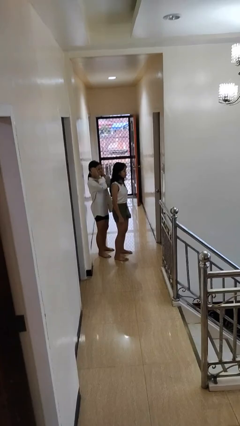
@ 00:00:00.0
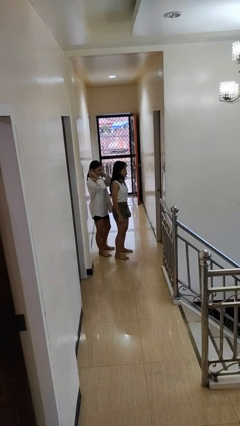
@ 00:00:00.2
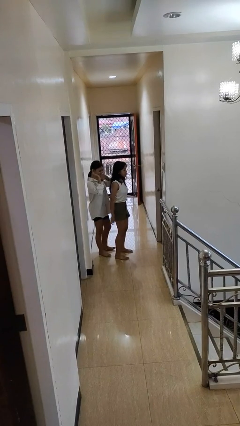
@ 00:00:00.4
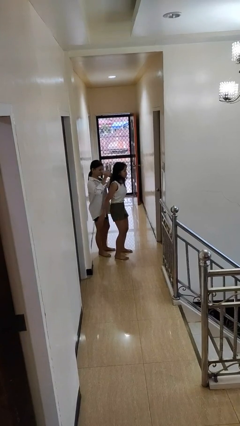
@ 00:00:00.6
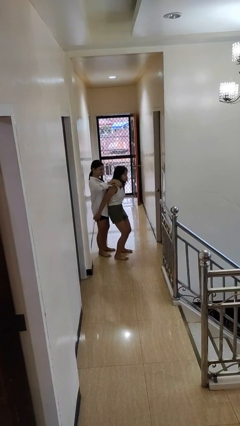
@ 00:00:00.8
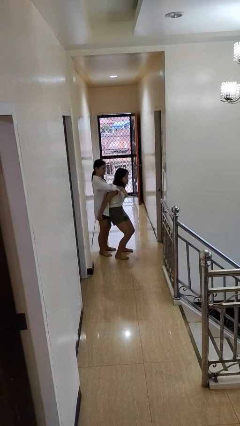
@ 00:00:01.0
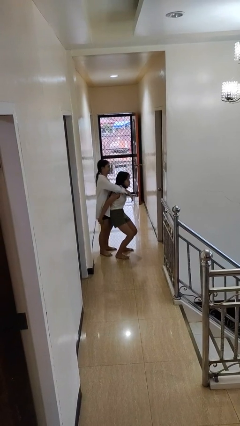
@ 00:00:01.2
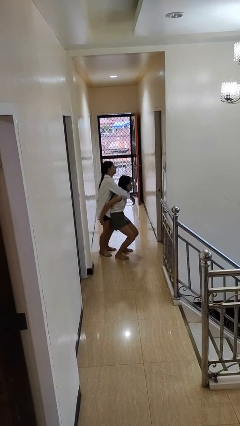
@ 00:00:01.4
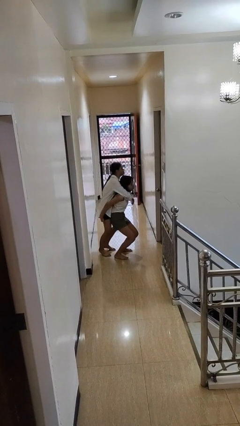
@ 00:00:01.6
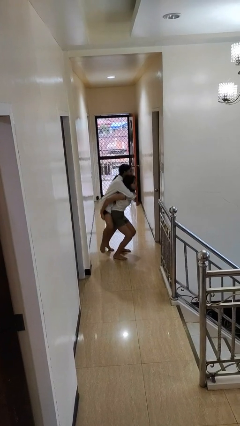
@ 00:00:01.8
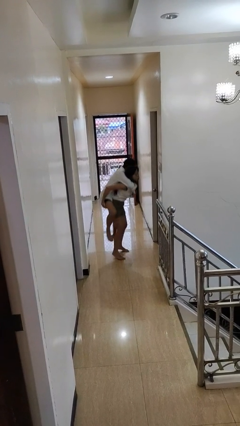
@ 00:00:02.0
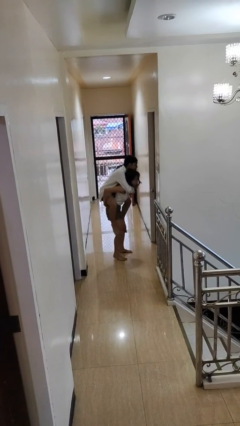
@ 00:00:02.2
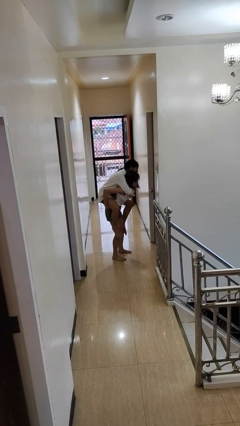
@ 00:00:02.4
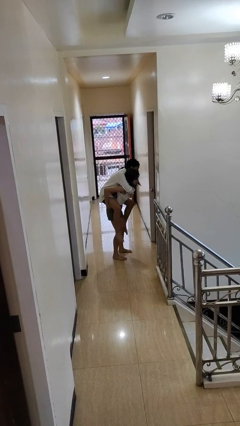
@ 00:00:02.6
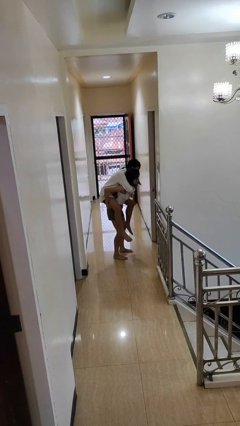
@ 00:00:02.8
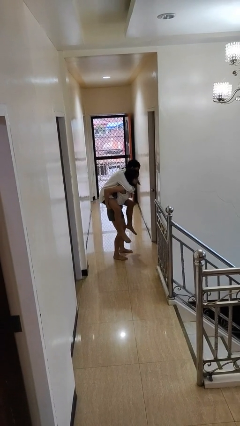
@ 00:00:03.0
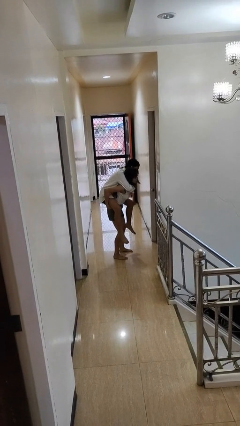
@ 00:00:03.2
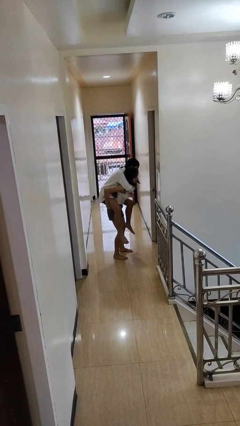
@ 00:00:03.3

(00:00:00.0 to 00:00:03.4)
person carries person over shoulder

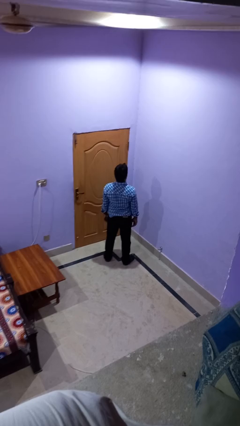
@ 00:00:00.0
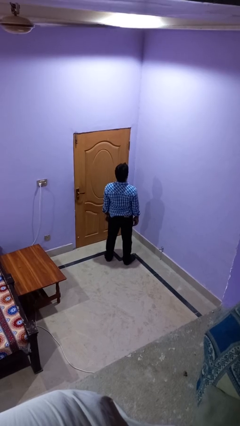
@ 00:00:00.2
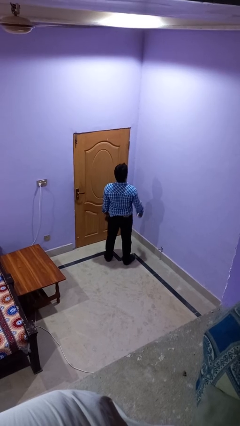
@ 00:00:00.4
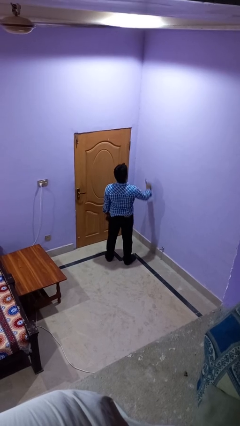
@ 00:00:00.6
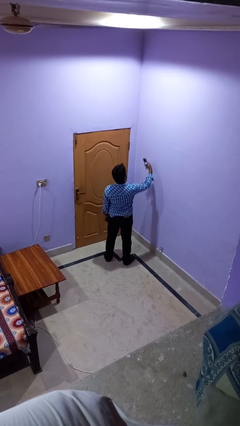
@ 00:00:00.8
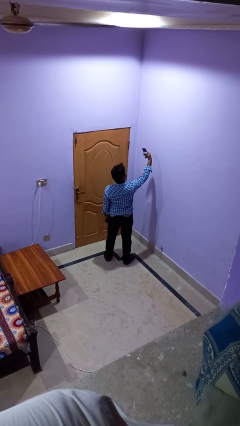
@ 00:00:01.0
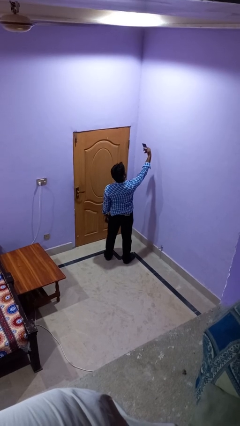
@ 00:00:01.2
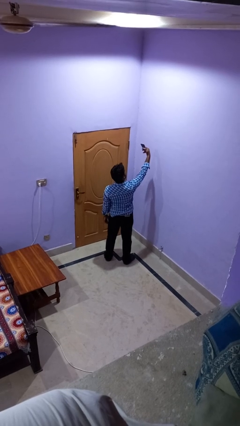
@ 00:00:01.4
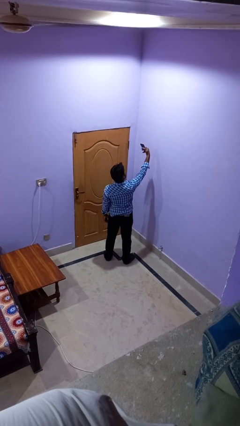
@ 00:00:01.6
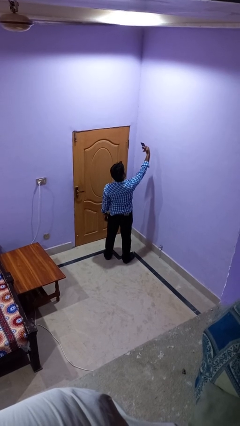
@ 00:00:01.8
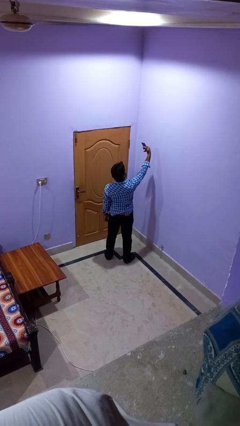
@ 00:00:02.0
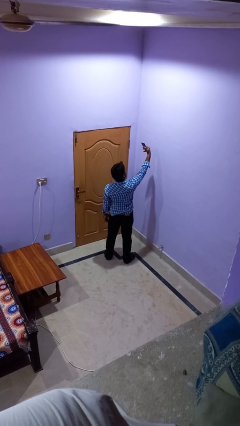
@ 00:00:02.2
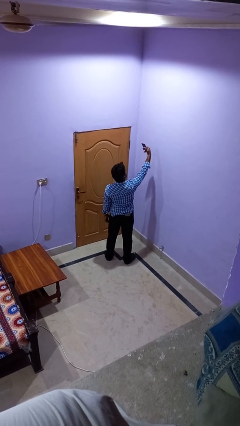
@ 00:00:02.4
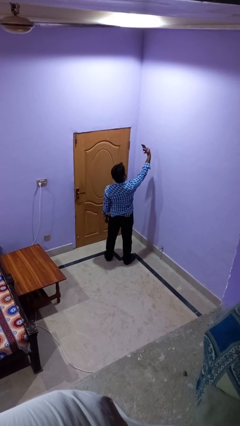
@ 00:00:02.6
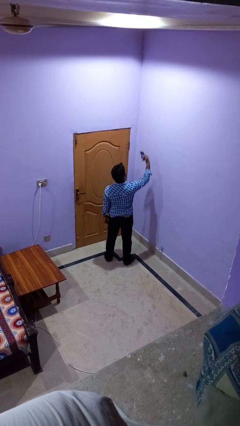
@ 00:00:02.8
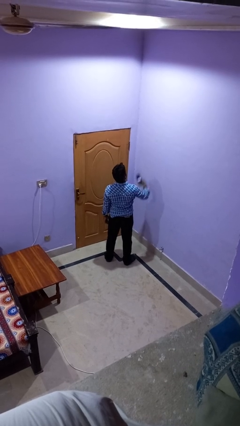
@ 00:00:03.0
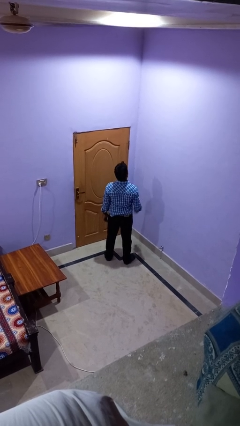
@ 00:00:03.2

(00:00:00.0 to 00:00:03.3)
person takes selfie

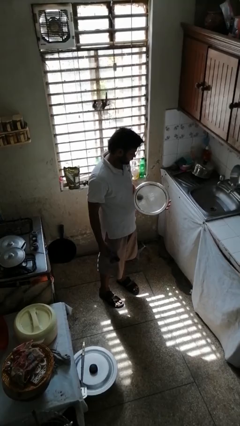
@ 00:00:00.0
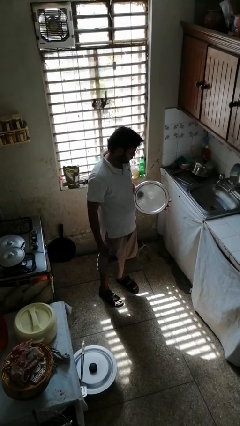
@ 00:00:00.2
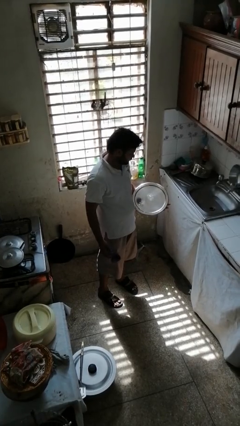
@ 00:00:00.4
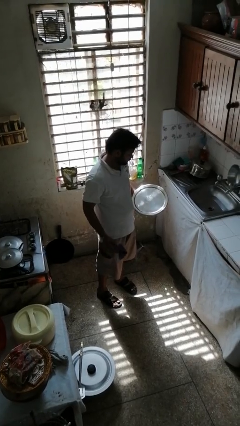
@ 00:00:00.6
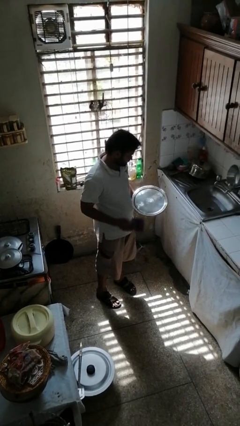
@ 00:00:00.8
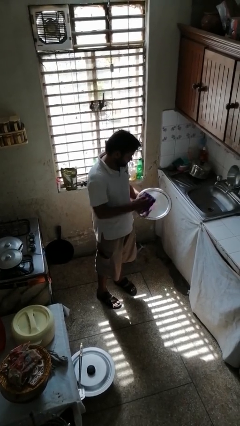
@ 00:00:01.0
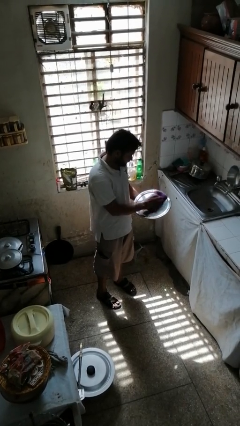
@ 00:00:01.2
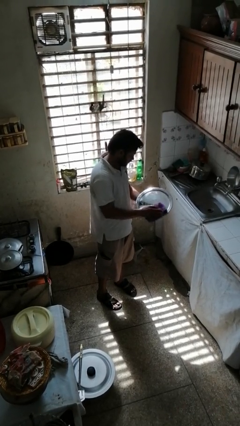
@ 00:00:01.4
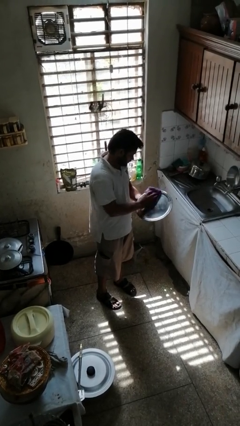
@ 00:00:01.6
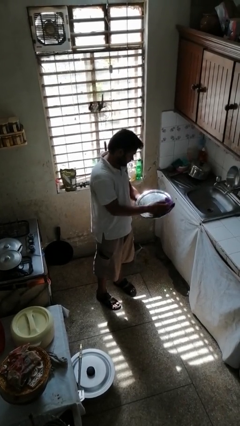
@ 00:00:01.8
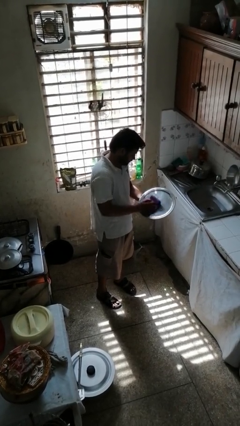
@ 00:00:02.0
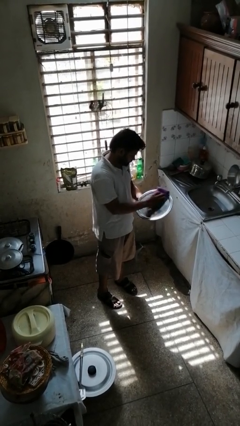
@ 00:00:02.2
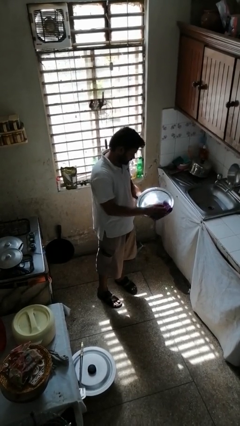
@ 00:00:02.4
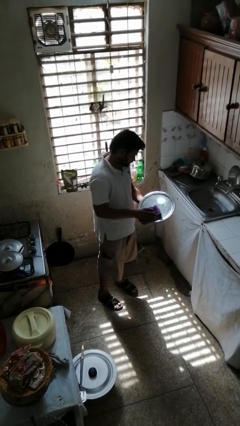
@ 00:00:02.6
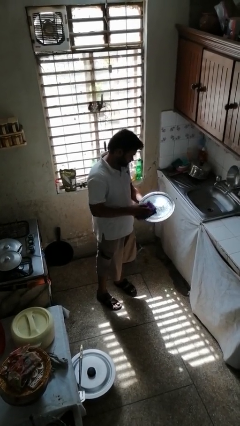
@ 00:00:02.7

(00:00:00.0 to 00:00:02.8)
person dries dish

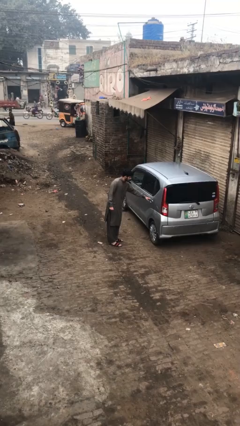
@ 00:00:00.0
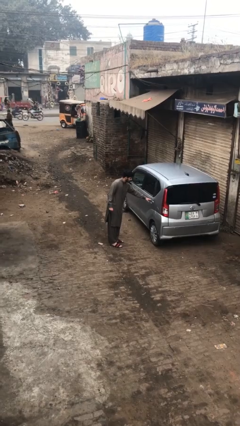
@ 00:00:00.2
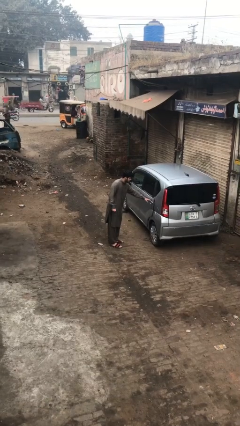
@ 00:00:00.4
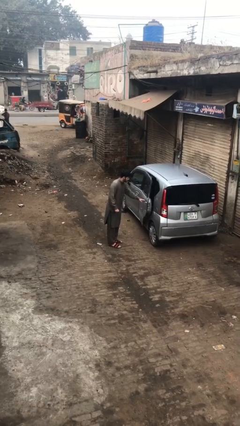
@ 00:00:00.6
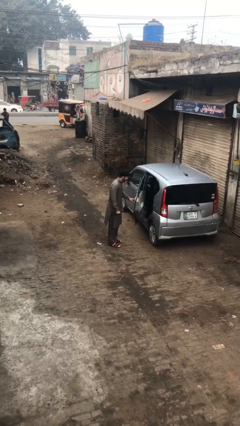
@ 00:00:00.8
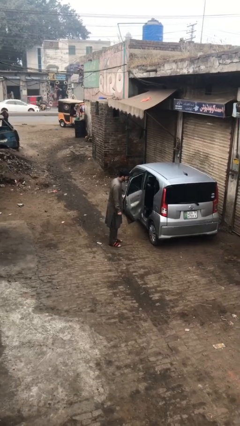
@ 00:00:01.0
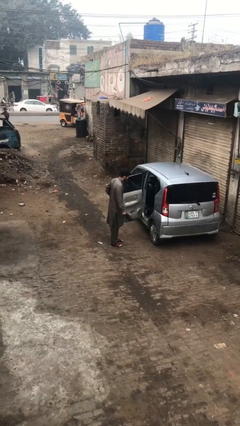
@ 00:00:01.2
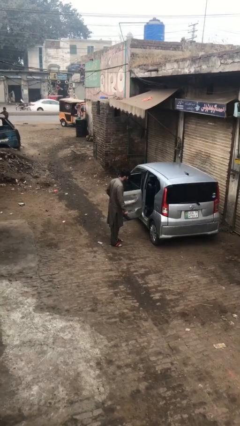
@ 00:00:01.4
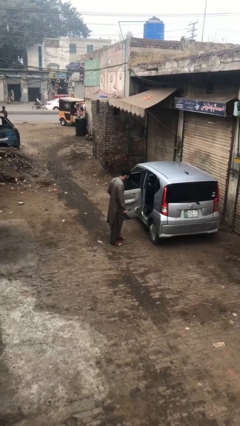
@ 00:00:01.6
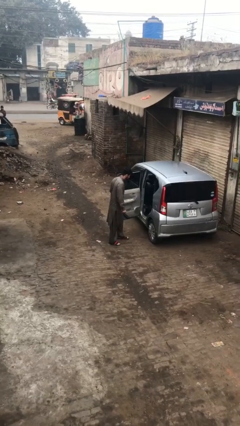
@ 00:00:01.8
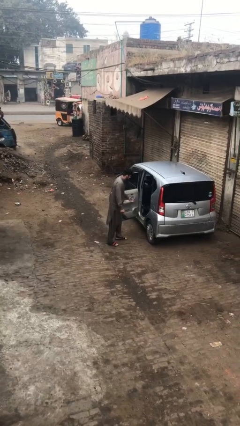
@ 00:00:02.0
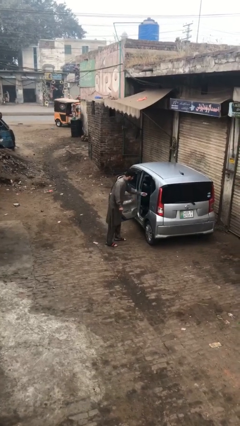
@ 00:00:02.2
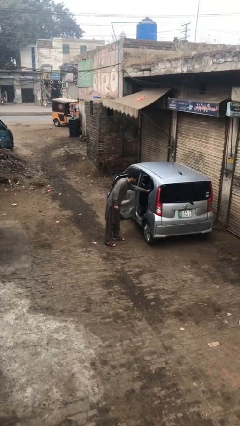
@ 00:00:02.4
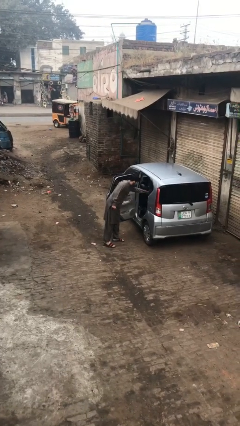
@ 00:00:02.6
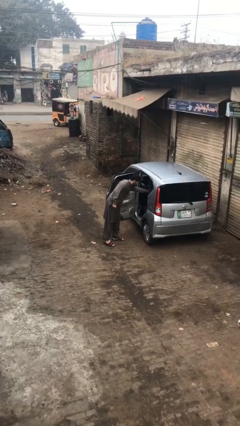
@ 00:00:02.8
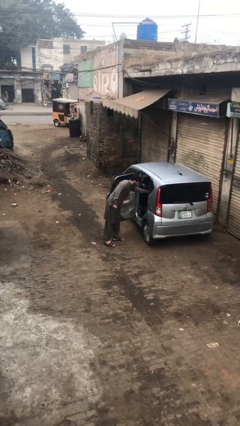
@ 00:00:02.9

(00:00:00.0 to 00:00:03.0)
person opens car door

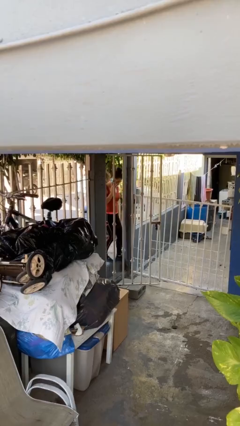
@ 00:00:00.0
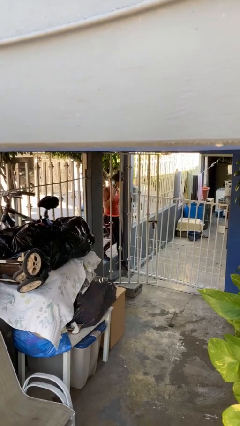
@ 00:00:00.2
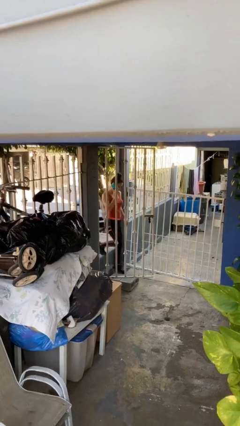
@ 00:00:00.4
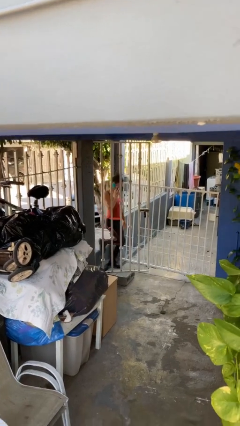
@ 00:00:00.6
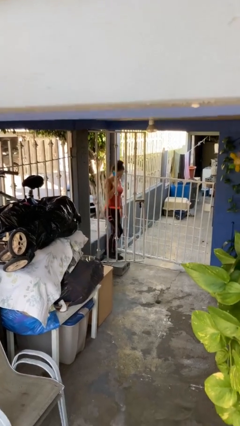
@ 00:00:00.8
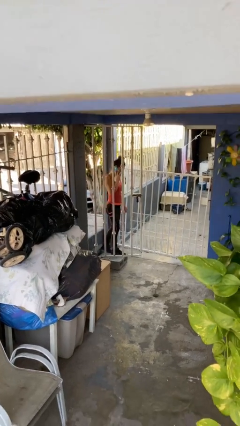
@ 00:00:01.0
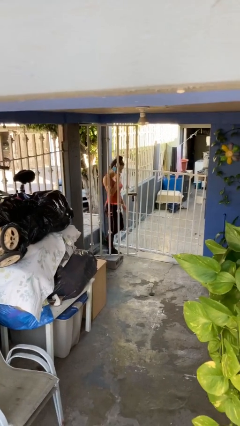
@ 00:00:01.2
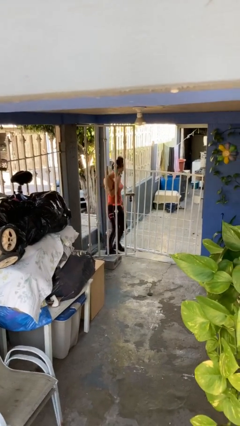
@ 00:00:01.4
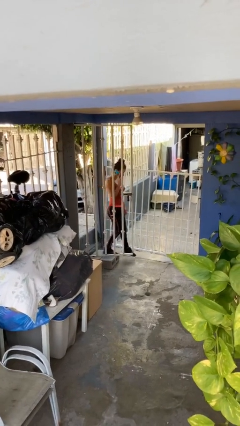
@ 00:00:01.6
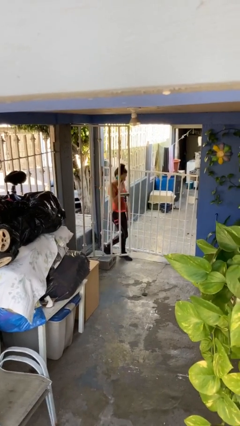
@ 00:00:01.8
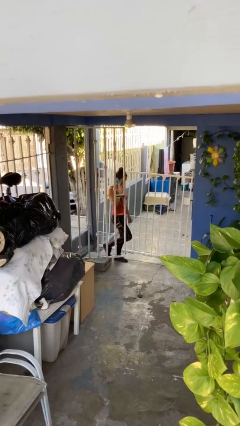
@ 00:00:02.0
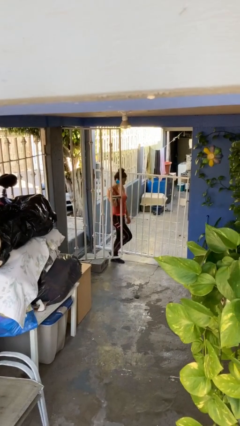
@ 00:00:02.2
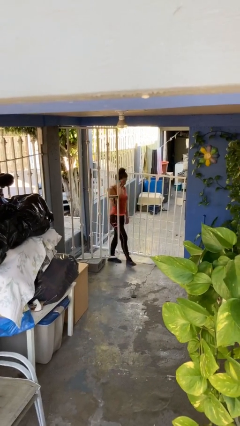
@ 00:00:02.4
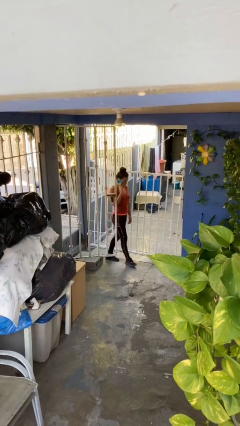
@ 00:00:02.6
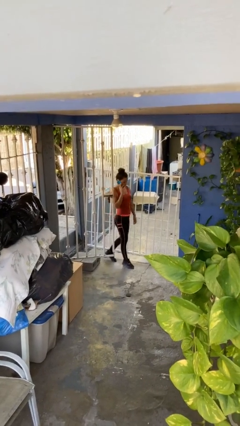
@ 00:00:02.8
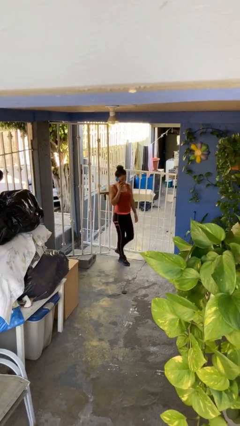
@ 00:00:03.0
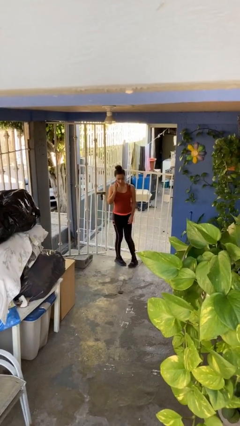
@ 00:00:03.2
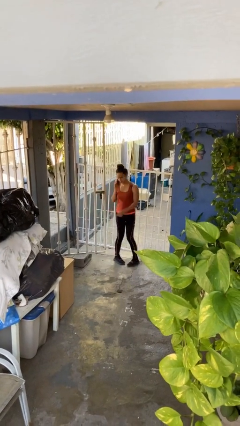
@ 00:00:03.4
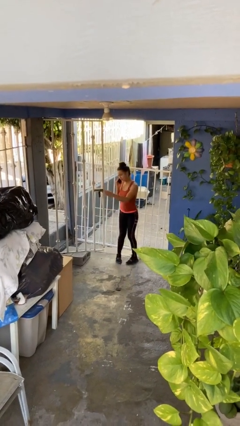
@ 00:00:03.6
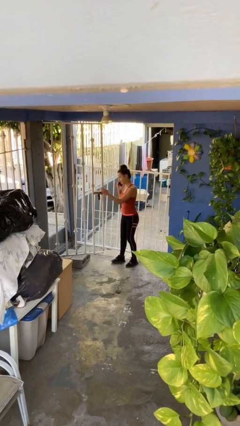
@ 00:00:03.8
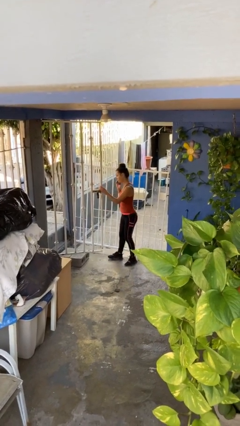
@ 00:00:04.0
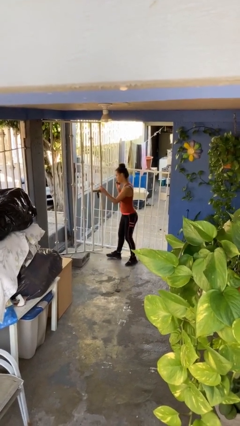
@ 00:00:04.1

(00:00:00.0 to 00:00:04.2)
person enters scene through structure

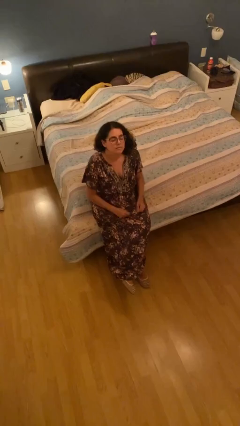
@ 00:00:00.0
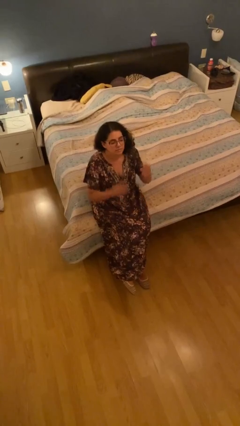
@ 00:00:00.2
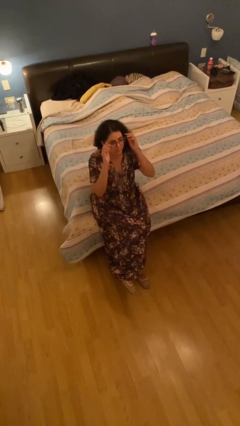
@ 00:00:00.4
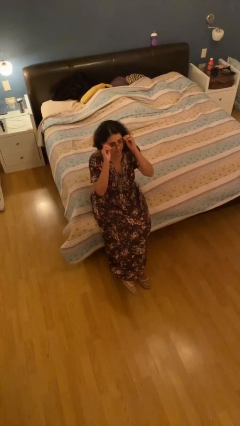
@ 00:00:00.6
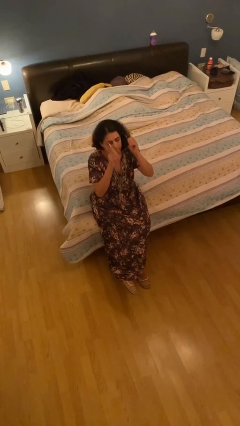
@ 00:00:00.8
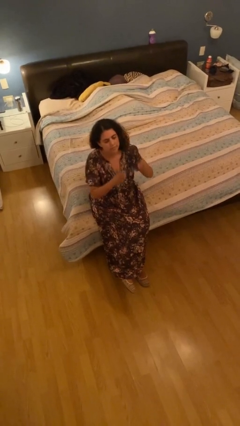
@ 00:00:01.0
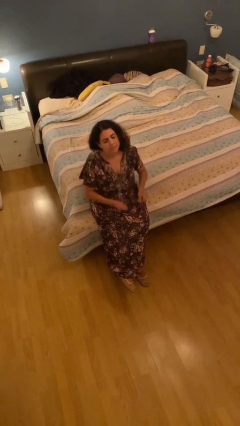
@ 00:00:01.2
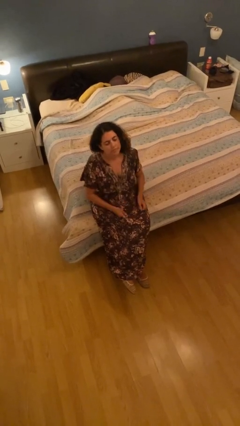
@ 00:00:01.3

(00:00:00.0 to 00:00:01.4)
person takes off glasses
